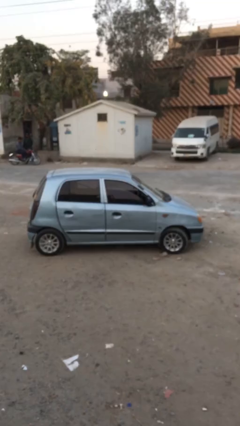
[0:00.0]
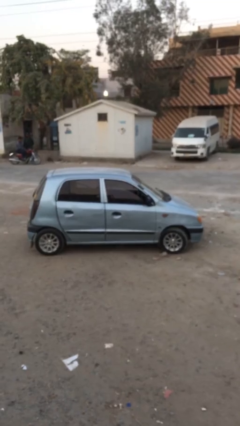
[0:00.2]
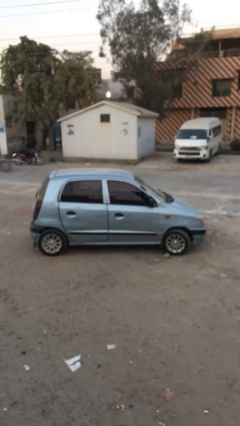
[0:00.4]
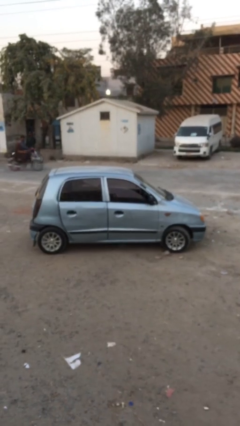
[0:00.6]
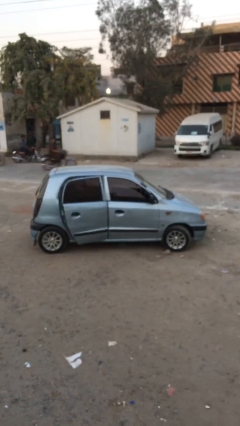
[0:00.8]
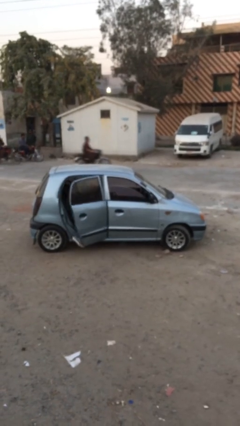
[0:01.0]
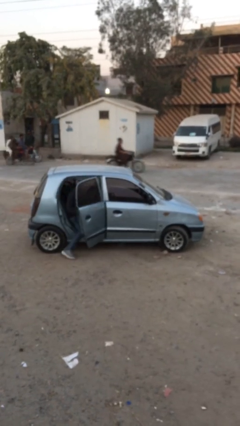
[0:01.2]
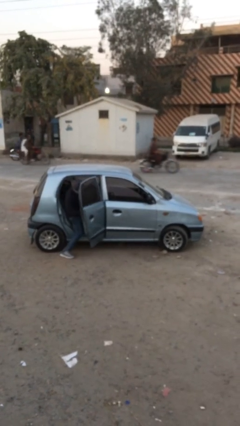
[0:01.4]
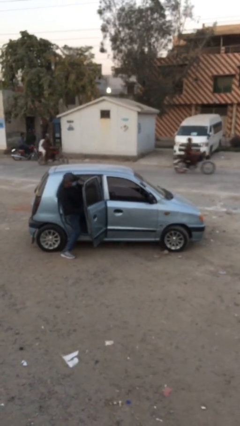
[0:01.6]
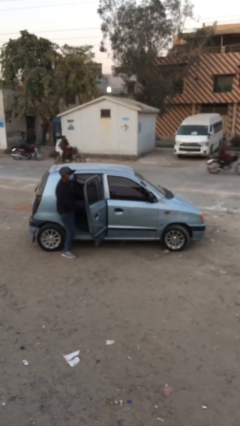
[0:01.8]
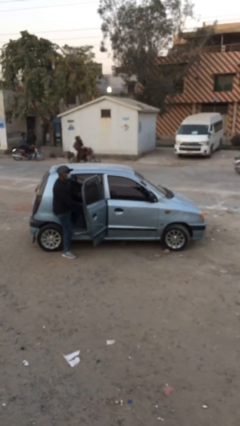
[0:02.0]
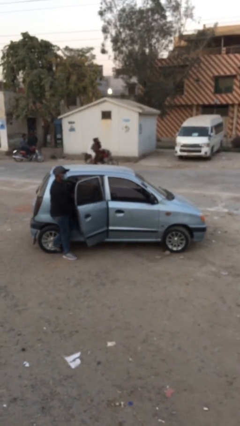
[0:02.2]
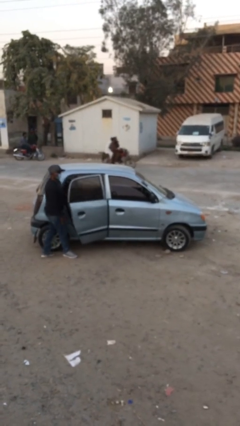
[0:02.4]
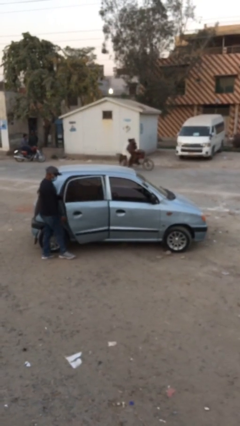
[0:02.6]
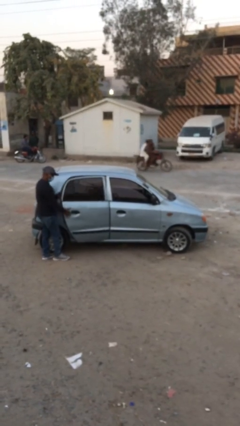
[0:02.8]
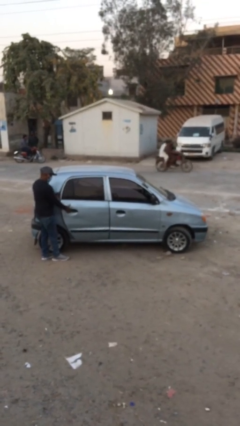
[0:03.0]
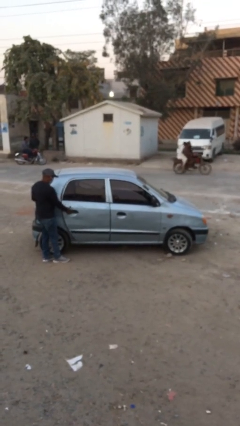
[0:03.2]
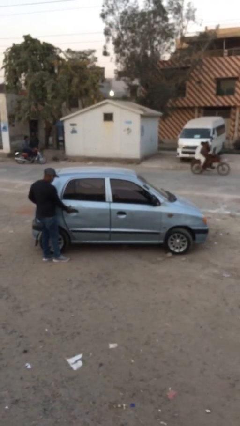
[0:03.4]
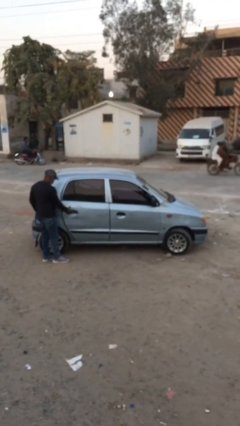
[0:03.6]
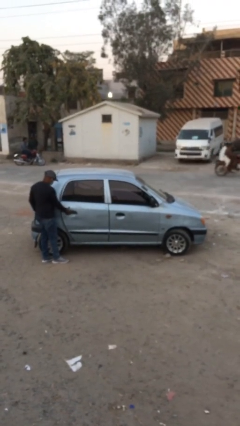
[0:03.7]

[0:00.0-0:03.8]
car drops off person

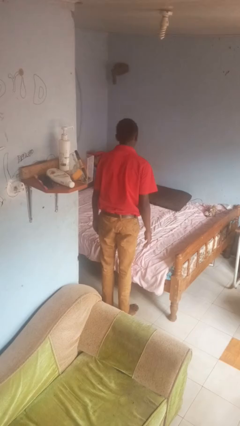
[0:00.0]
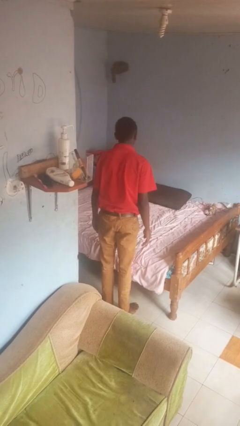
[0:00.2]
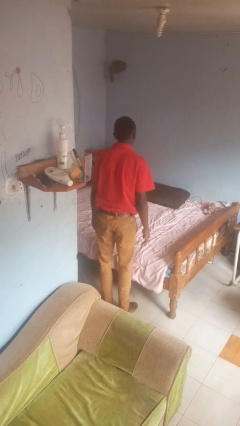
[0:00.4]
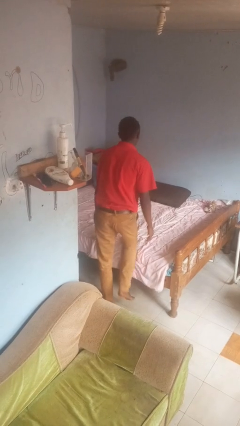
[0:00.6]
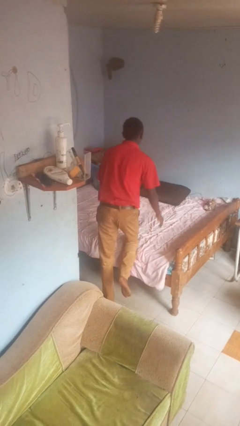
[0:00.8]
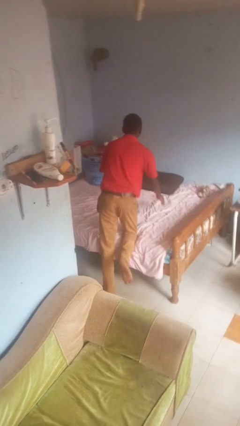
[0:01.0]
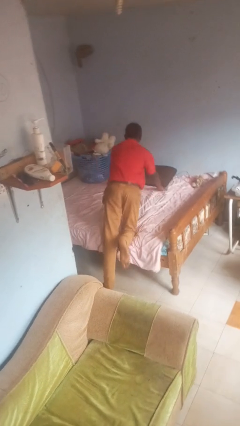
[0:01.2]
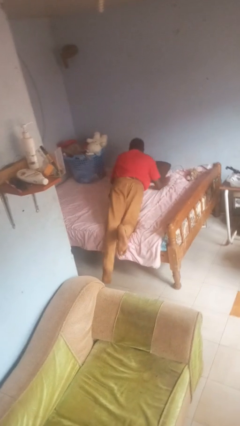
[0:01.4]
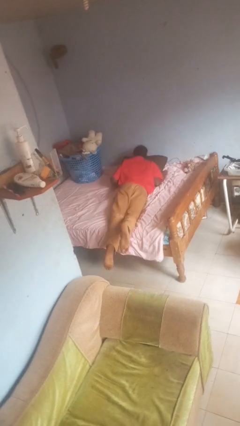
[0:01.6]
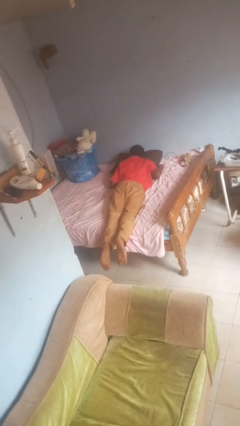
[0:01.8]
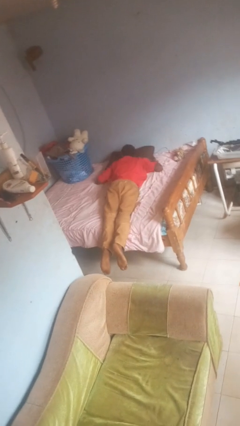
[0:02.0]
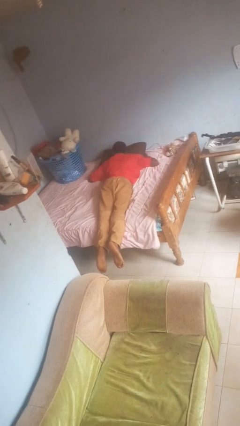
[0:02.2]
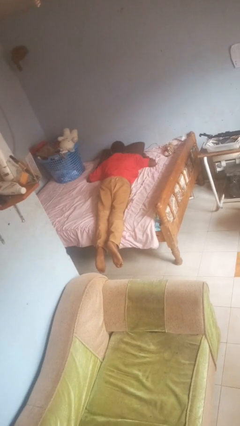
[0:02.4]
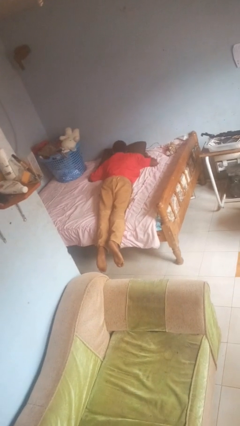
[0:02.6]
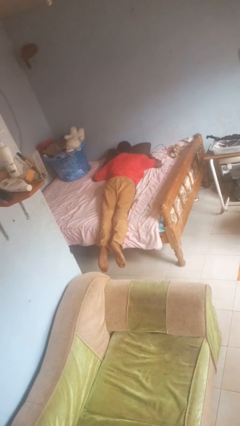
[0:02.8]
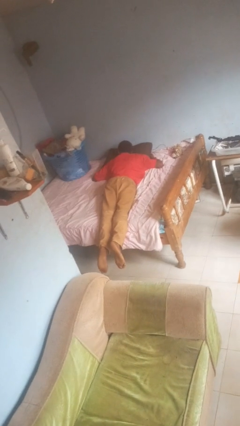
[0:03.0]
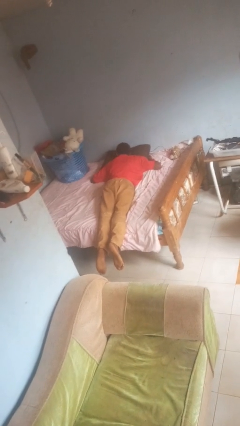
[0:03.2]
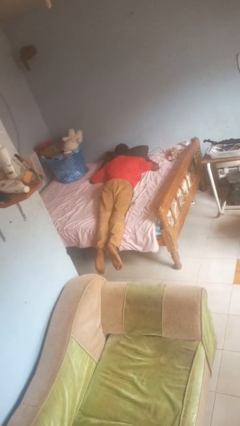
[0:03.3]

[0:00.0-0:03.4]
person lies down on bed

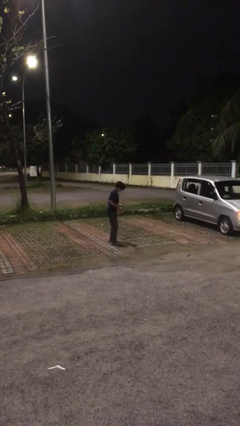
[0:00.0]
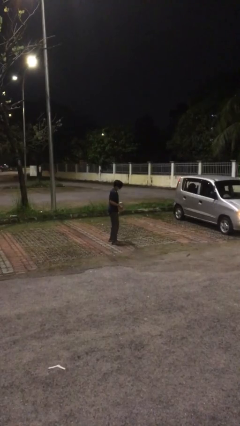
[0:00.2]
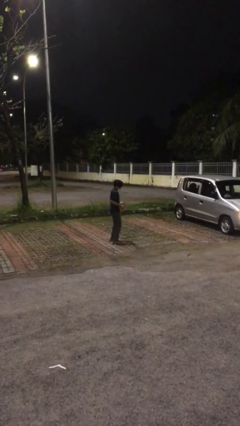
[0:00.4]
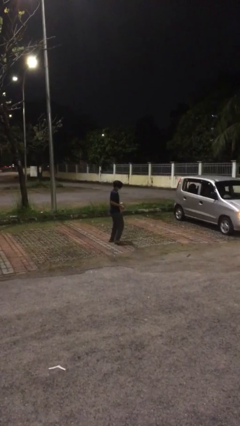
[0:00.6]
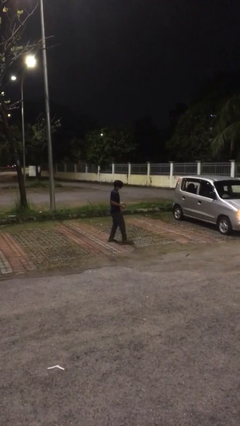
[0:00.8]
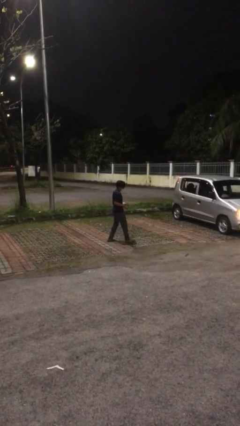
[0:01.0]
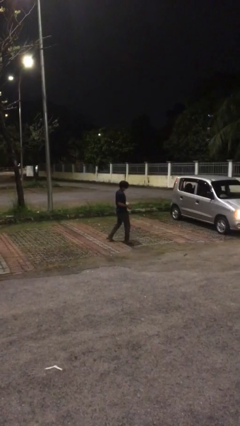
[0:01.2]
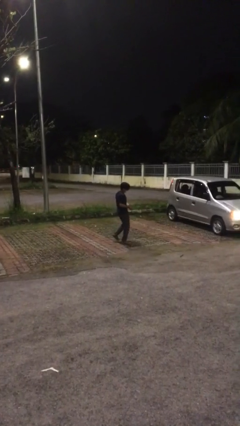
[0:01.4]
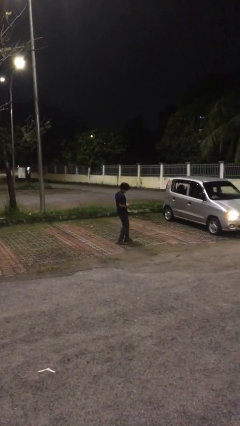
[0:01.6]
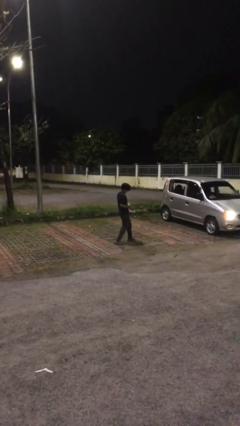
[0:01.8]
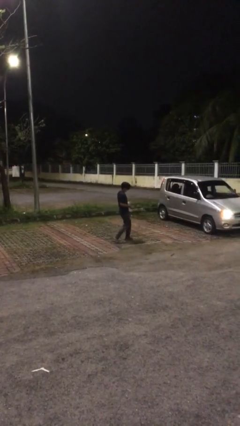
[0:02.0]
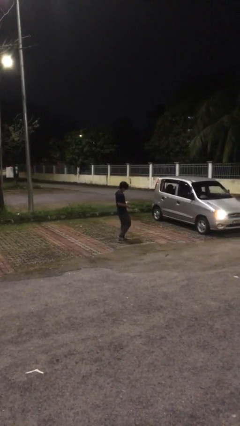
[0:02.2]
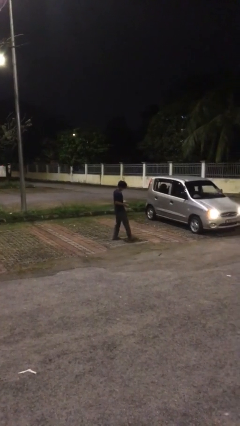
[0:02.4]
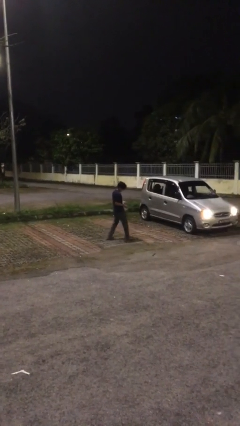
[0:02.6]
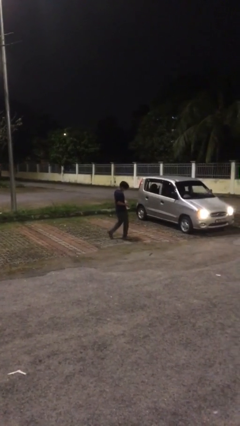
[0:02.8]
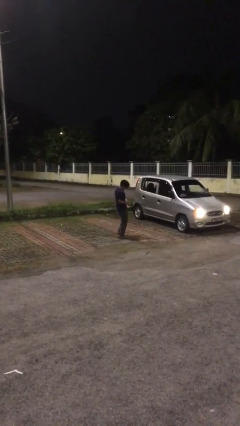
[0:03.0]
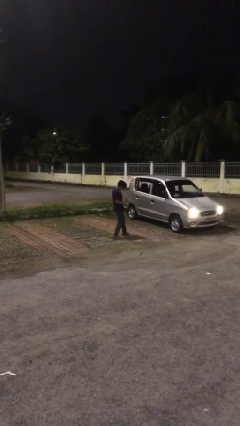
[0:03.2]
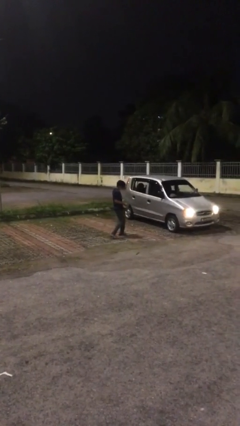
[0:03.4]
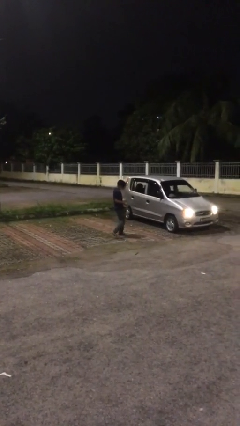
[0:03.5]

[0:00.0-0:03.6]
person carries heavy object

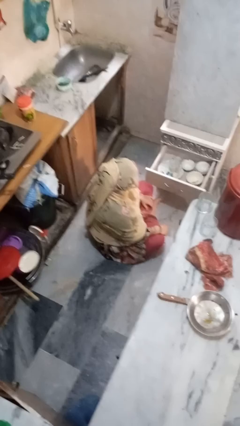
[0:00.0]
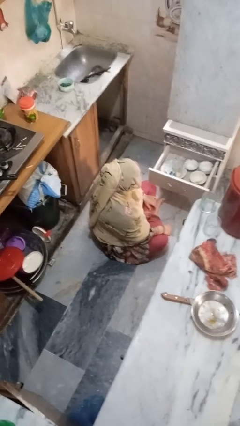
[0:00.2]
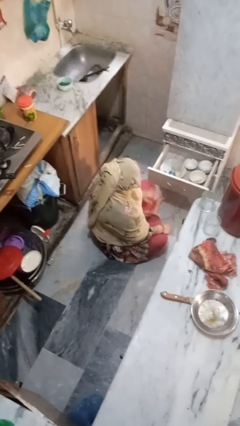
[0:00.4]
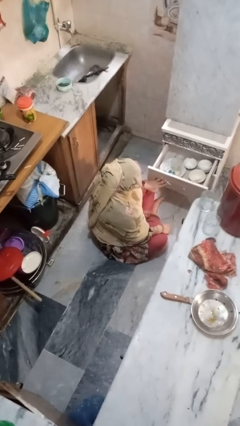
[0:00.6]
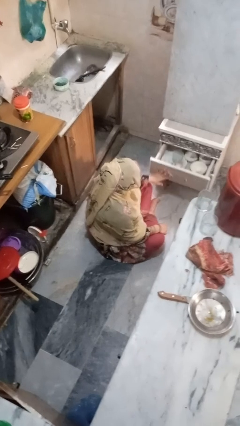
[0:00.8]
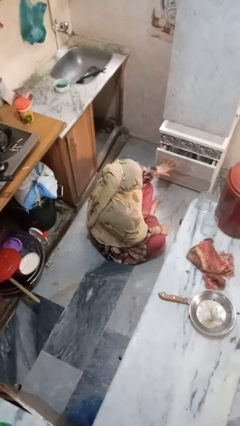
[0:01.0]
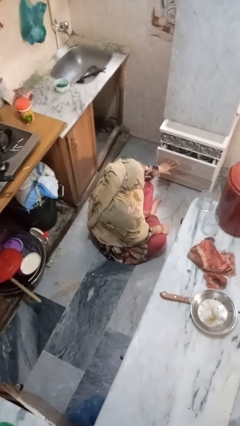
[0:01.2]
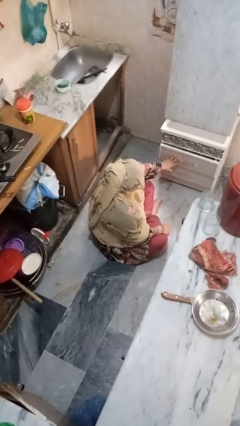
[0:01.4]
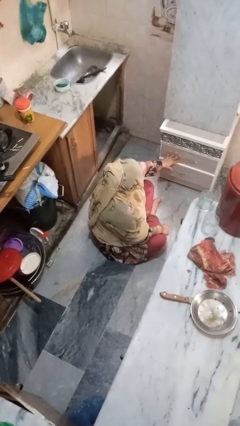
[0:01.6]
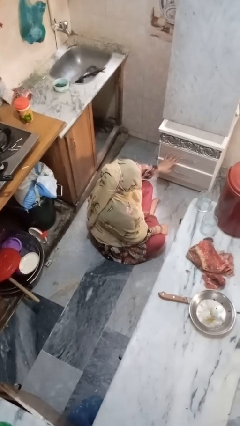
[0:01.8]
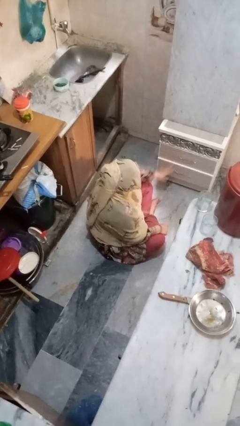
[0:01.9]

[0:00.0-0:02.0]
person closes kitchen drawer

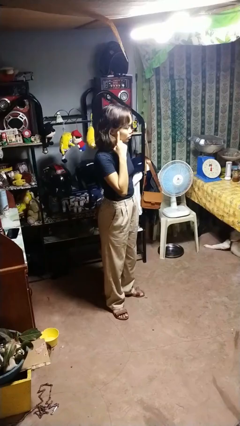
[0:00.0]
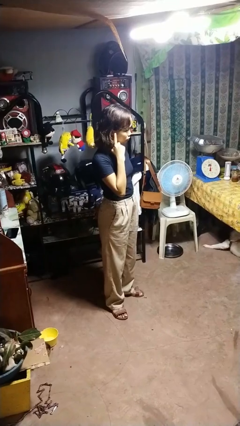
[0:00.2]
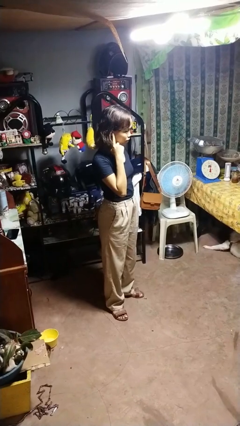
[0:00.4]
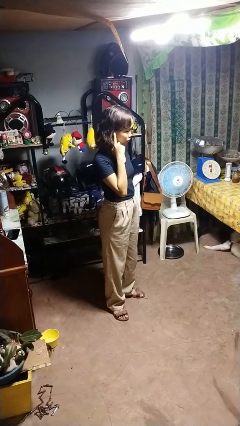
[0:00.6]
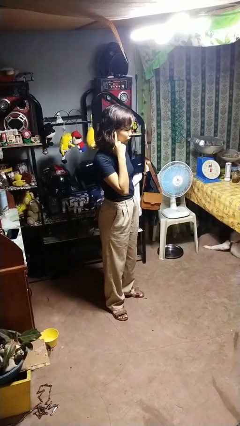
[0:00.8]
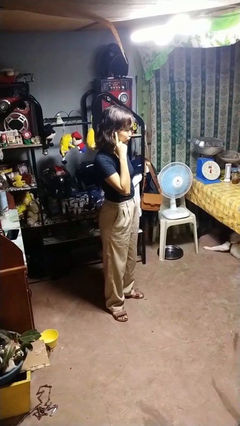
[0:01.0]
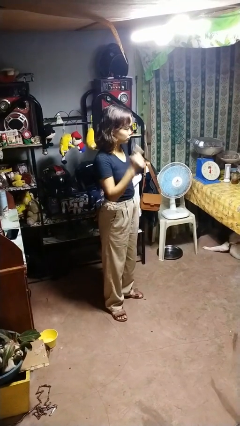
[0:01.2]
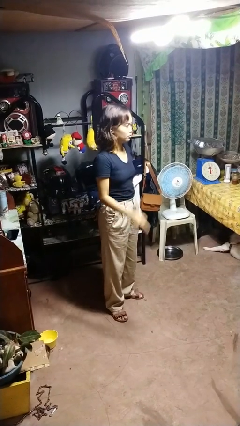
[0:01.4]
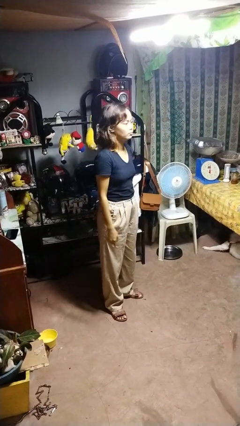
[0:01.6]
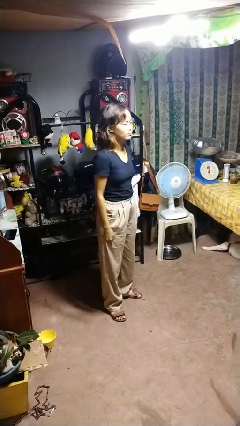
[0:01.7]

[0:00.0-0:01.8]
person gestures listen closely

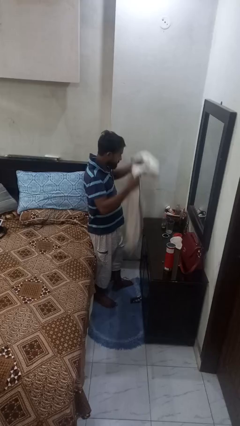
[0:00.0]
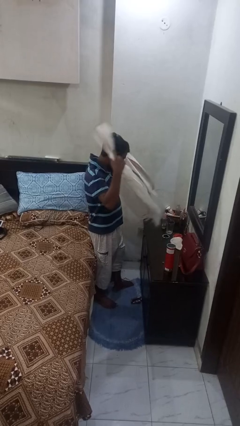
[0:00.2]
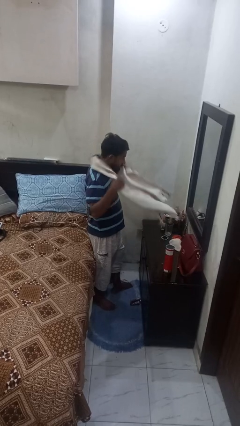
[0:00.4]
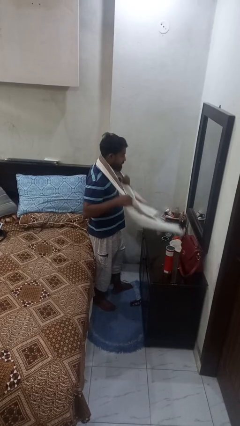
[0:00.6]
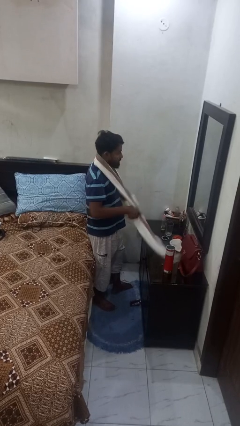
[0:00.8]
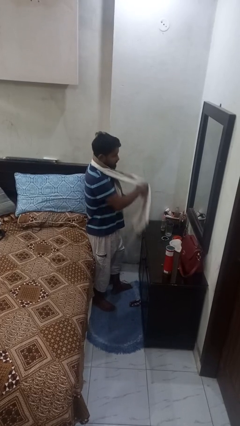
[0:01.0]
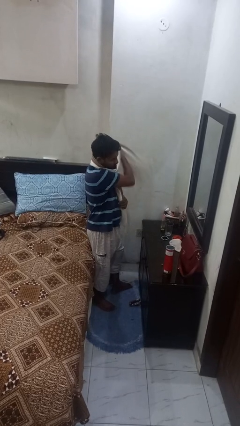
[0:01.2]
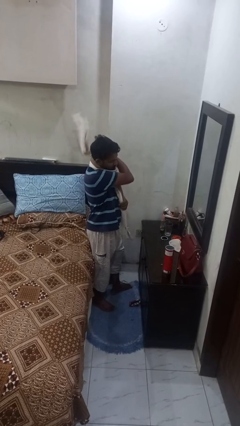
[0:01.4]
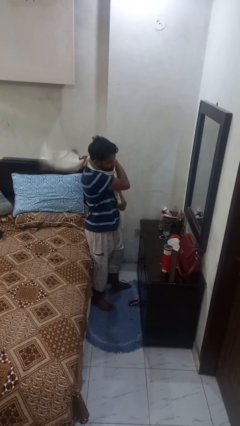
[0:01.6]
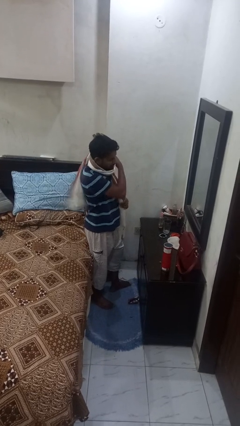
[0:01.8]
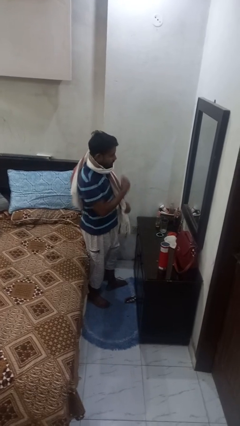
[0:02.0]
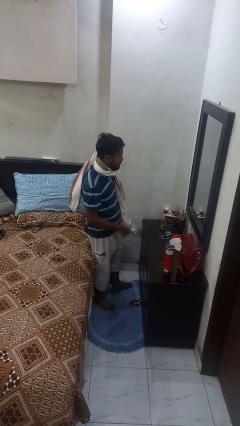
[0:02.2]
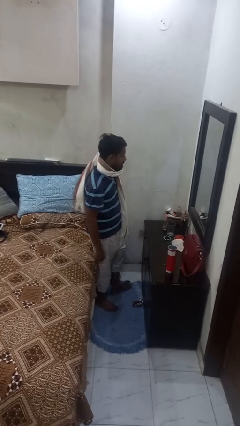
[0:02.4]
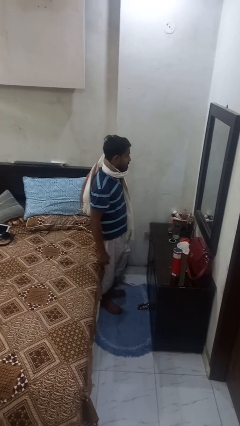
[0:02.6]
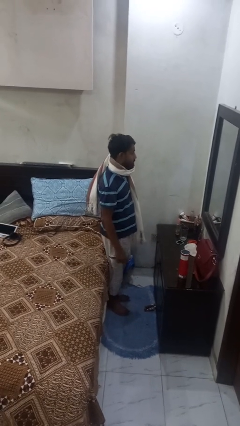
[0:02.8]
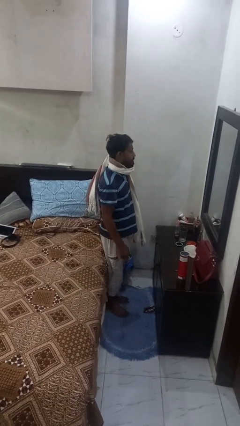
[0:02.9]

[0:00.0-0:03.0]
person puts on scarf

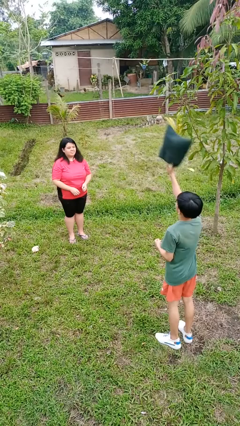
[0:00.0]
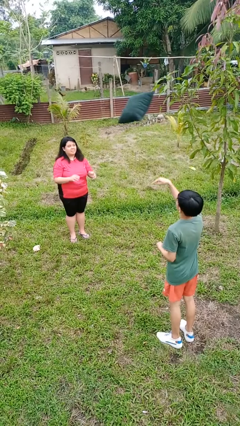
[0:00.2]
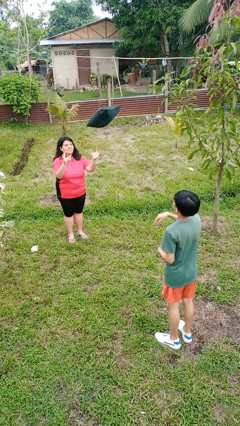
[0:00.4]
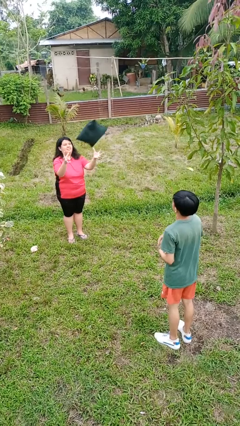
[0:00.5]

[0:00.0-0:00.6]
person catches object from person
